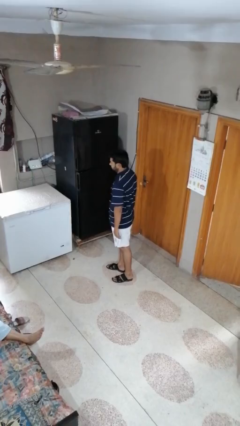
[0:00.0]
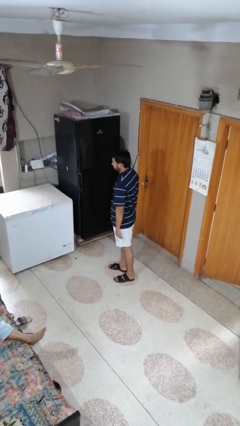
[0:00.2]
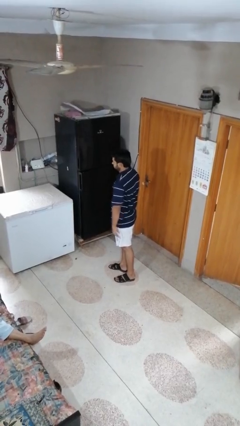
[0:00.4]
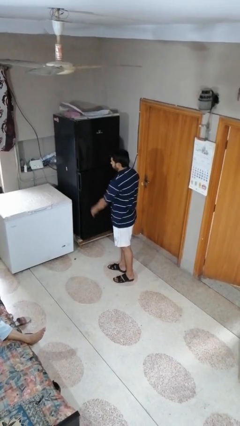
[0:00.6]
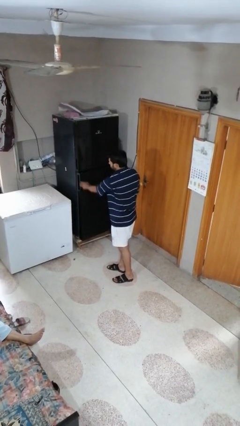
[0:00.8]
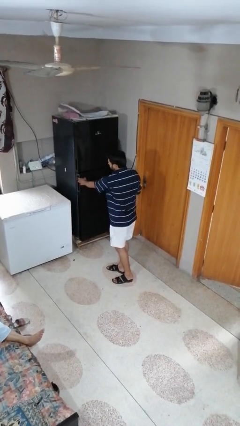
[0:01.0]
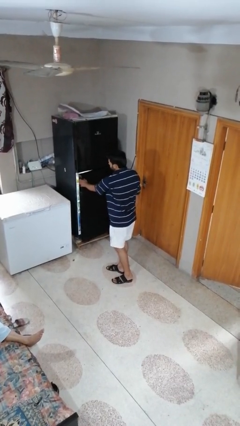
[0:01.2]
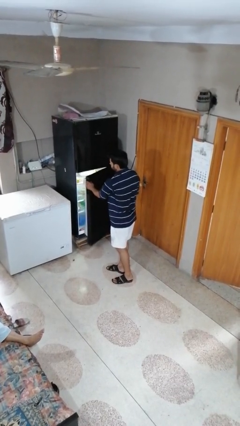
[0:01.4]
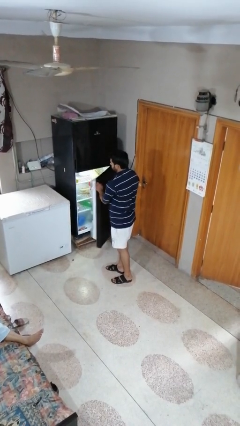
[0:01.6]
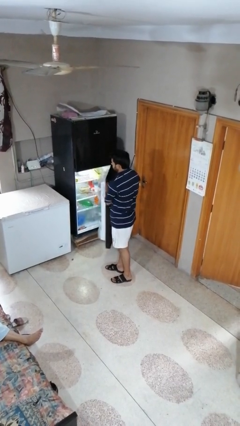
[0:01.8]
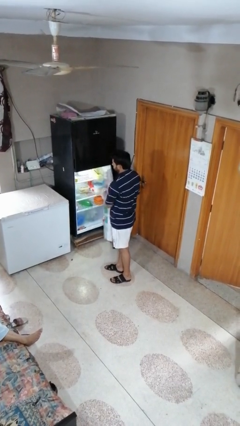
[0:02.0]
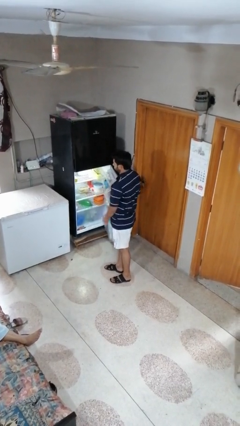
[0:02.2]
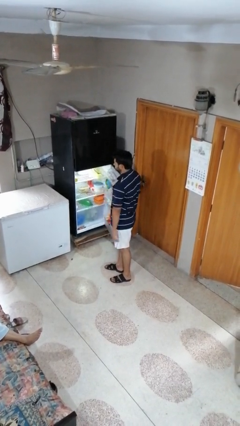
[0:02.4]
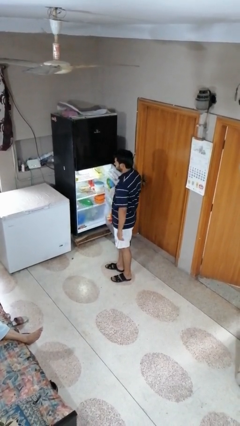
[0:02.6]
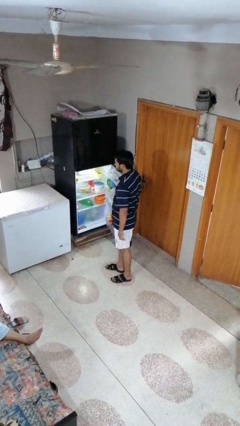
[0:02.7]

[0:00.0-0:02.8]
person opens refrigerator

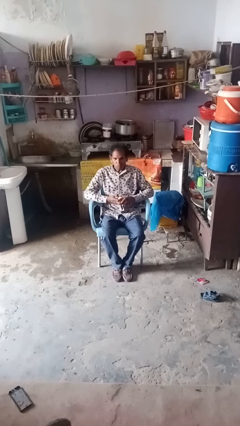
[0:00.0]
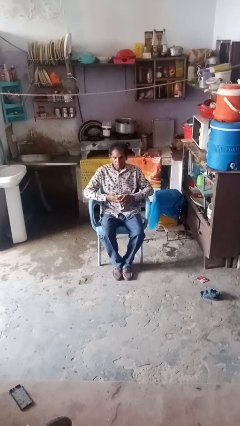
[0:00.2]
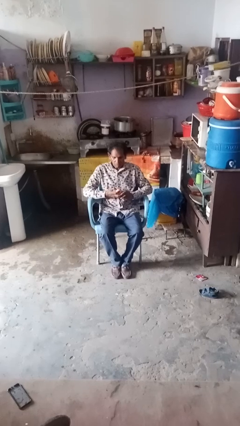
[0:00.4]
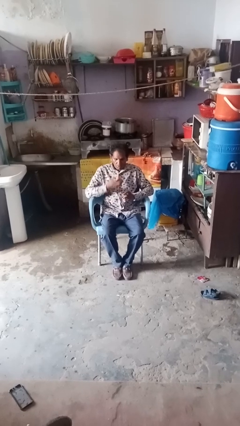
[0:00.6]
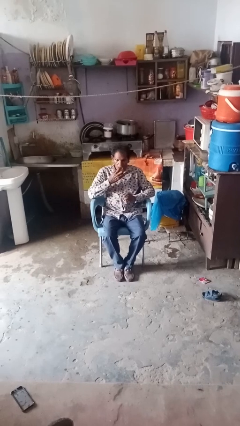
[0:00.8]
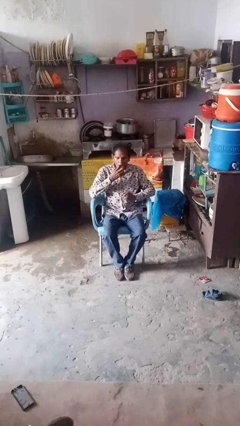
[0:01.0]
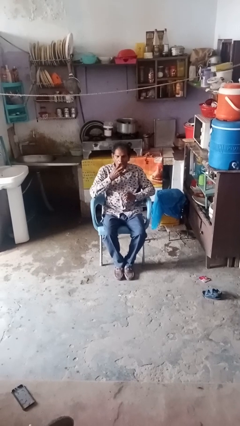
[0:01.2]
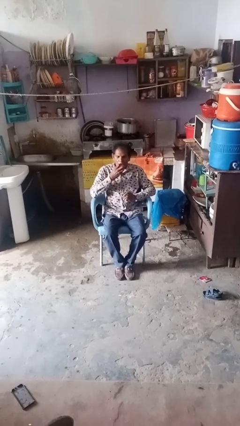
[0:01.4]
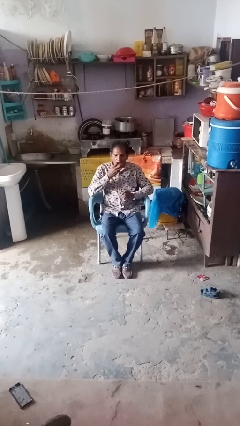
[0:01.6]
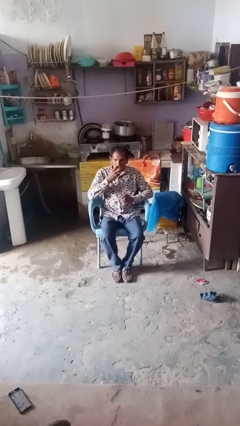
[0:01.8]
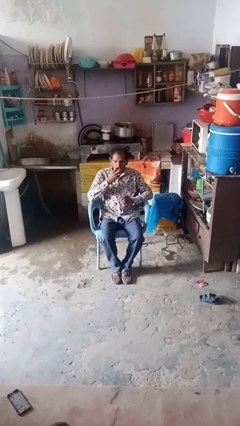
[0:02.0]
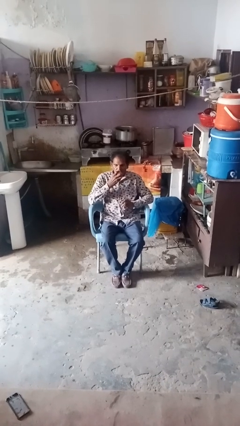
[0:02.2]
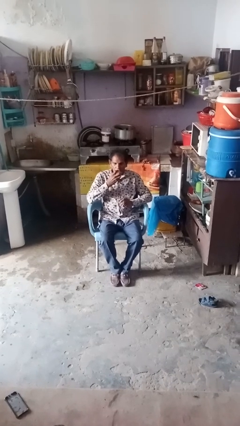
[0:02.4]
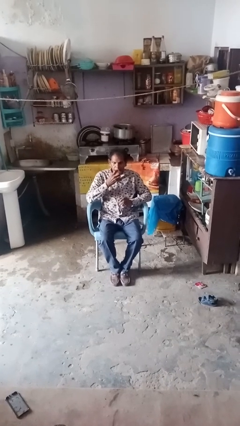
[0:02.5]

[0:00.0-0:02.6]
person eats apple

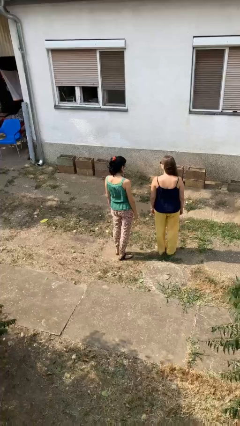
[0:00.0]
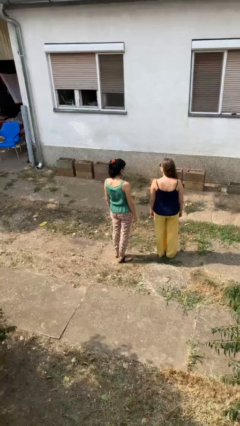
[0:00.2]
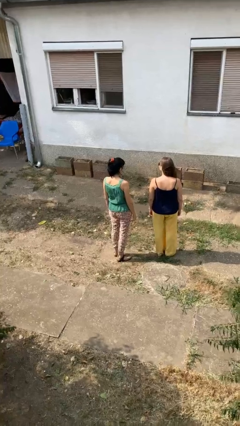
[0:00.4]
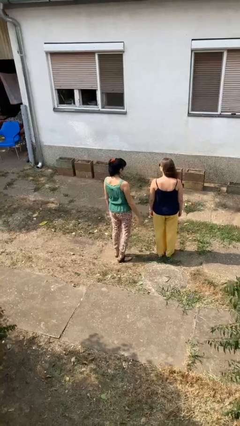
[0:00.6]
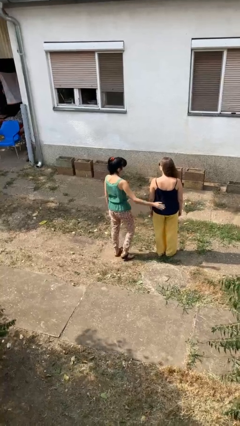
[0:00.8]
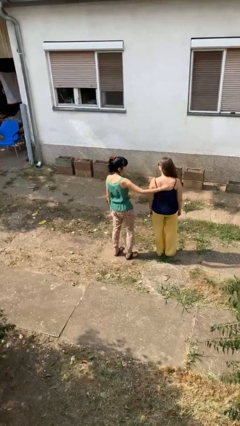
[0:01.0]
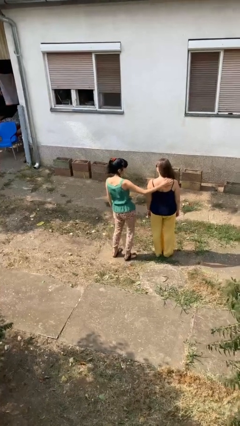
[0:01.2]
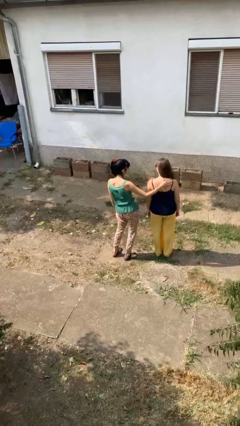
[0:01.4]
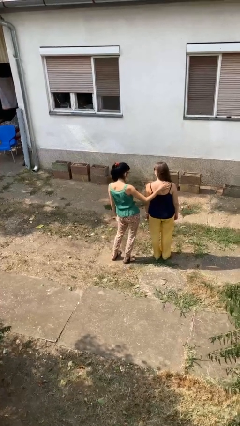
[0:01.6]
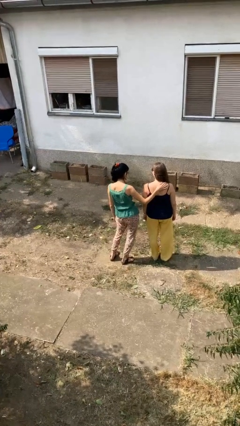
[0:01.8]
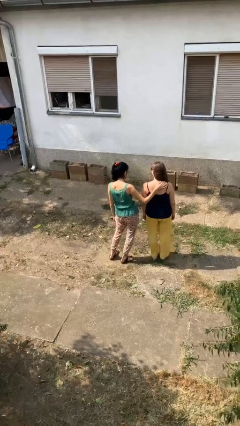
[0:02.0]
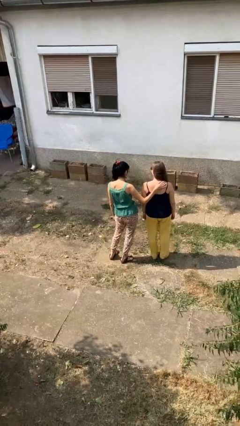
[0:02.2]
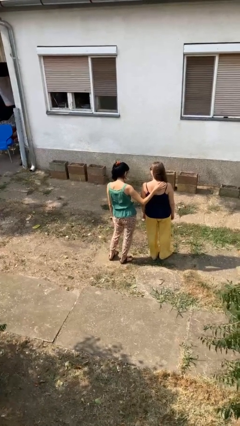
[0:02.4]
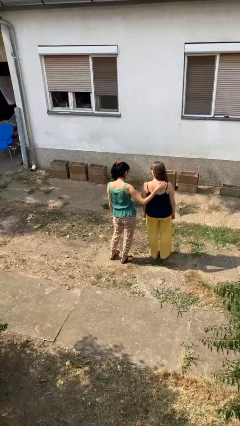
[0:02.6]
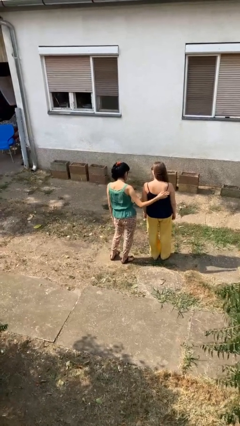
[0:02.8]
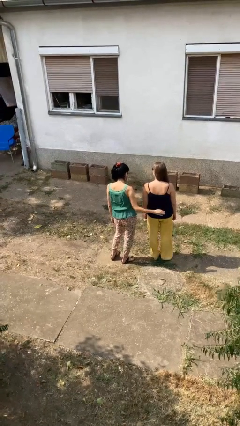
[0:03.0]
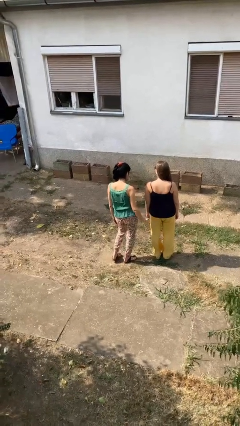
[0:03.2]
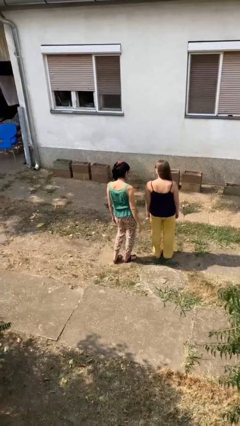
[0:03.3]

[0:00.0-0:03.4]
person touches back of person

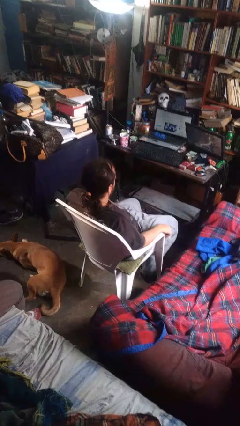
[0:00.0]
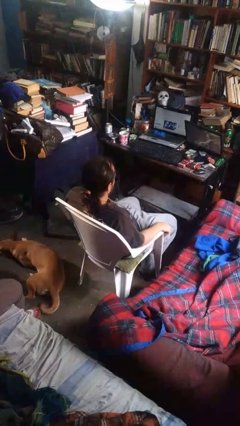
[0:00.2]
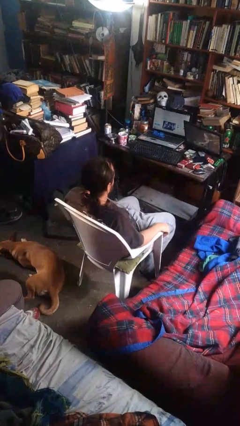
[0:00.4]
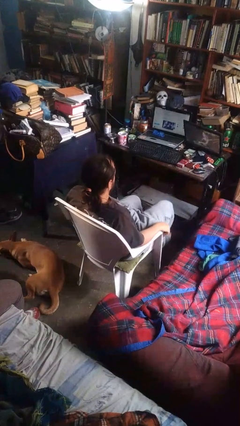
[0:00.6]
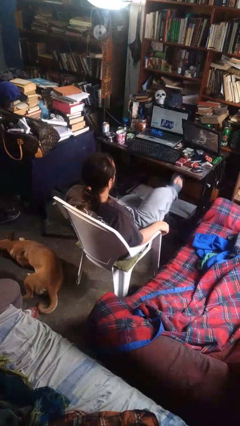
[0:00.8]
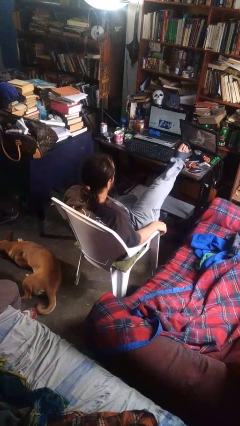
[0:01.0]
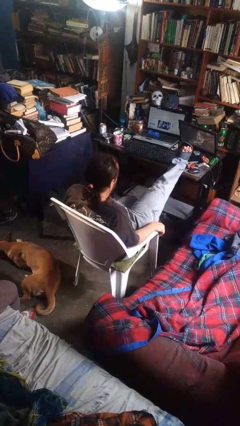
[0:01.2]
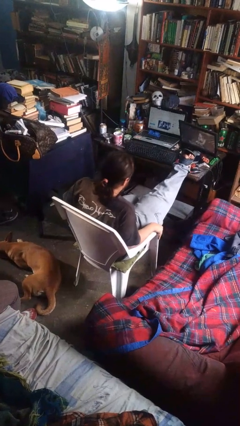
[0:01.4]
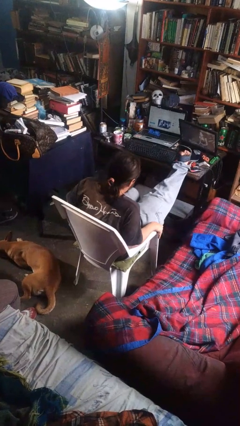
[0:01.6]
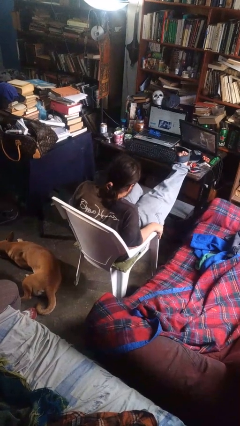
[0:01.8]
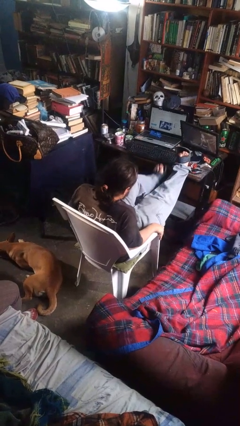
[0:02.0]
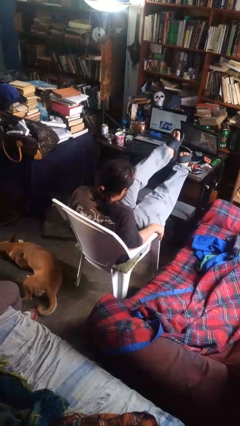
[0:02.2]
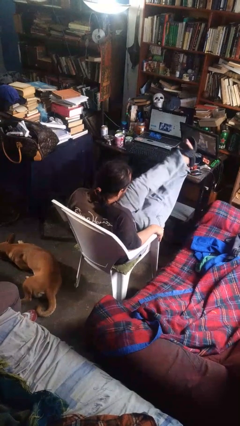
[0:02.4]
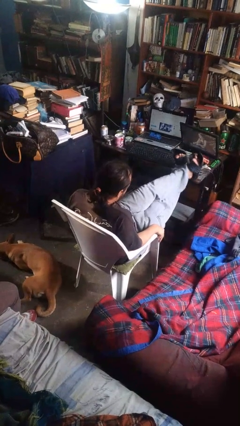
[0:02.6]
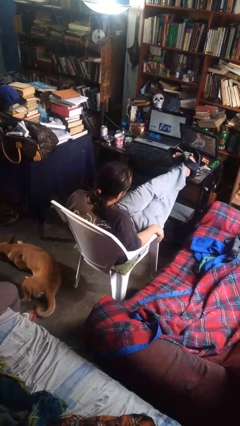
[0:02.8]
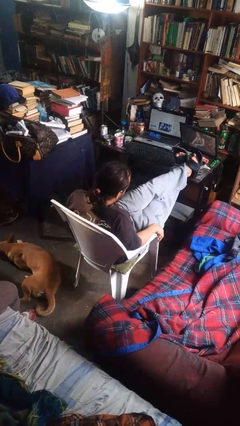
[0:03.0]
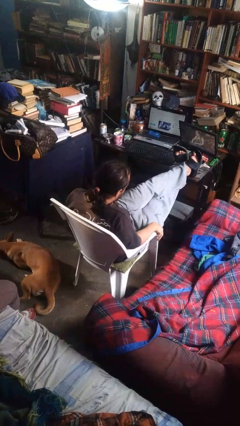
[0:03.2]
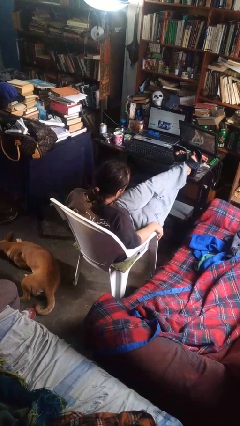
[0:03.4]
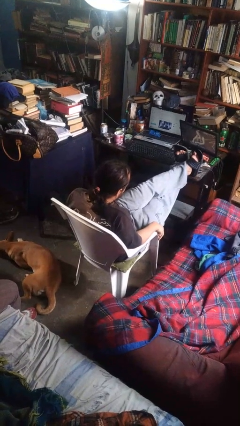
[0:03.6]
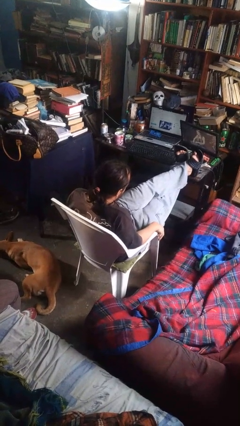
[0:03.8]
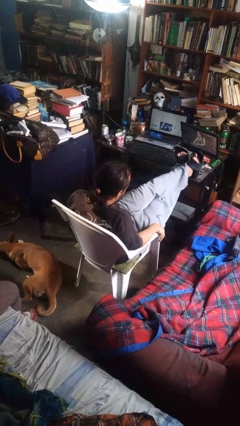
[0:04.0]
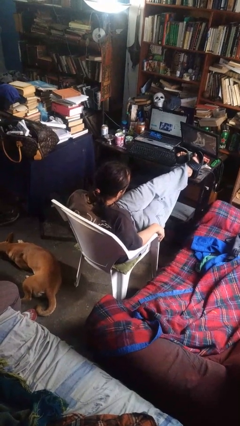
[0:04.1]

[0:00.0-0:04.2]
person puts feet up

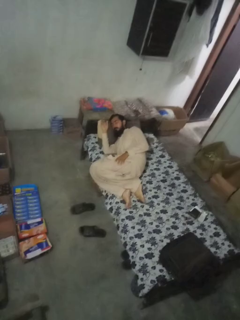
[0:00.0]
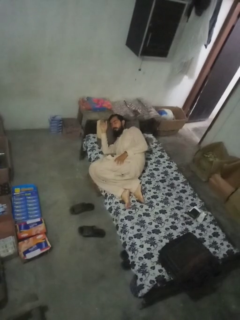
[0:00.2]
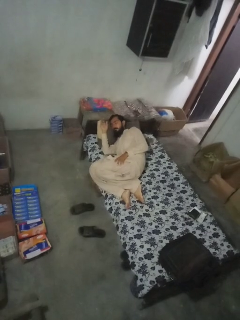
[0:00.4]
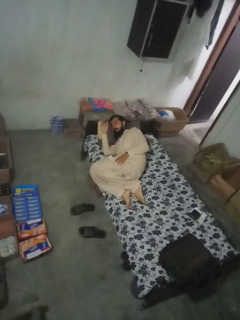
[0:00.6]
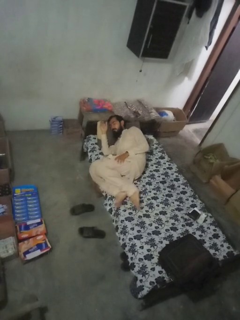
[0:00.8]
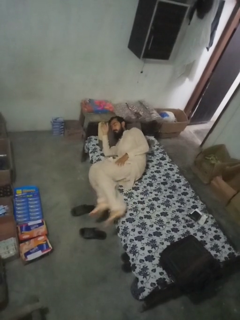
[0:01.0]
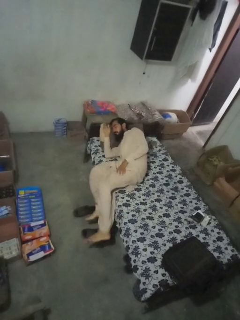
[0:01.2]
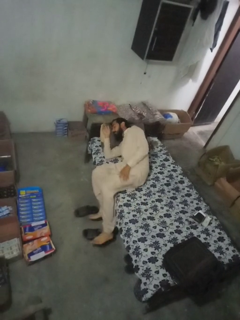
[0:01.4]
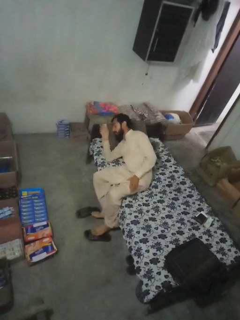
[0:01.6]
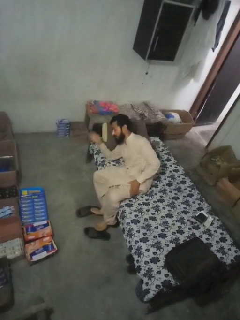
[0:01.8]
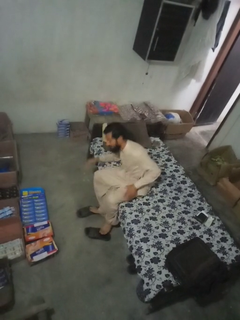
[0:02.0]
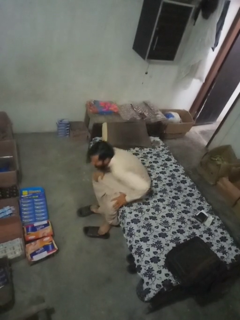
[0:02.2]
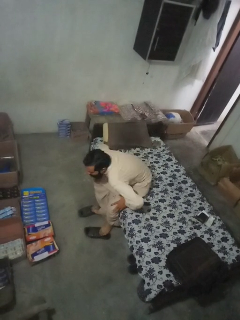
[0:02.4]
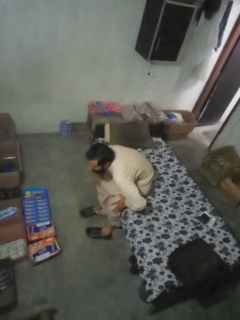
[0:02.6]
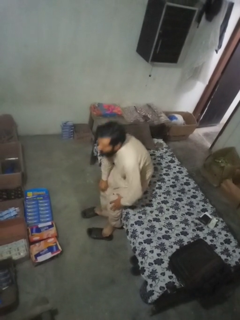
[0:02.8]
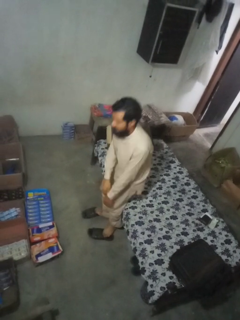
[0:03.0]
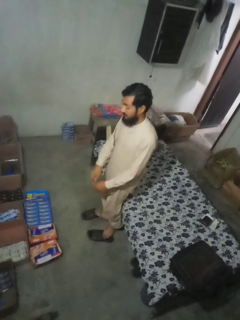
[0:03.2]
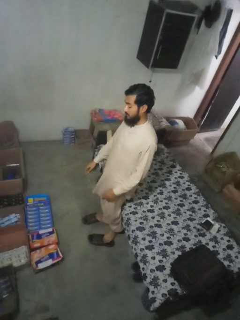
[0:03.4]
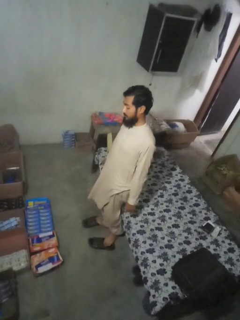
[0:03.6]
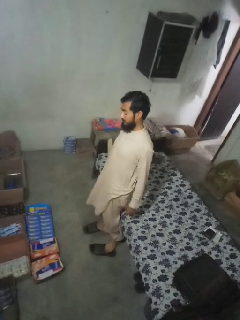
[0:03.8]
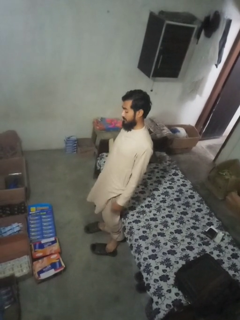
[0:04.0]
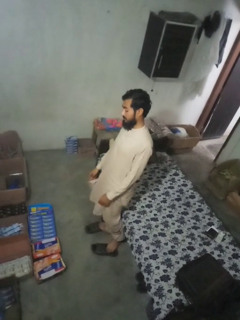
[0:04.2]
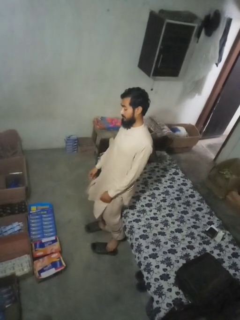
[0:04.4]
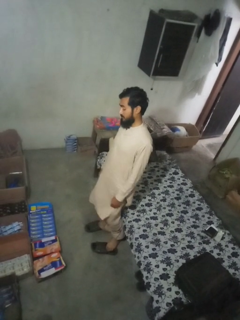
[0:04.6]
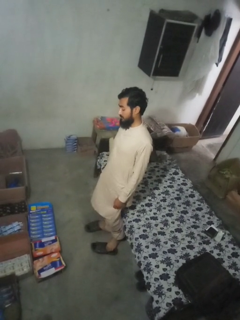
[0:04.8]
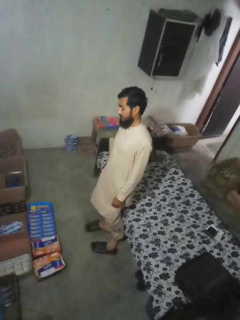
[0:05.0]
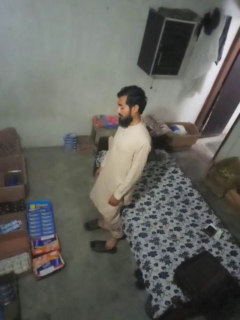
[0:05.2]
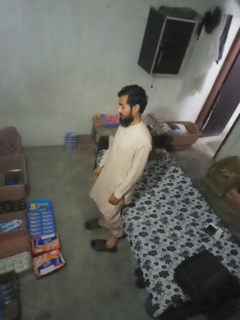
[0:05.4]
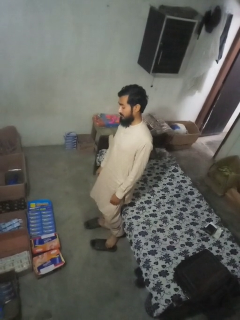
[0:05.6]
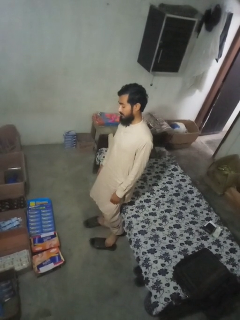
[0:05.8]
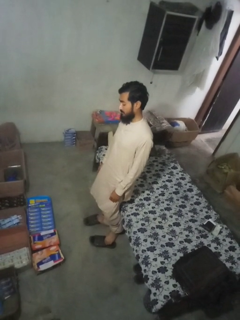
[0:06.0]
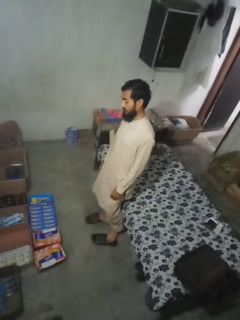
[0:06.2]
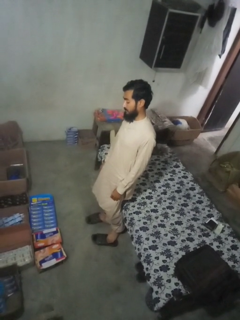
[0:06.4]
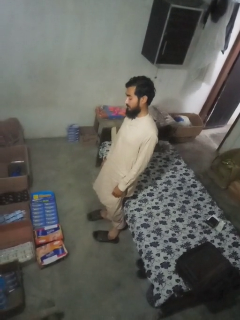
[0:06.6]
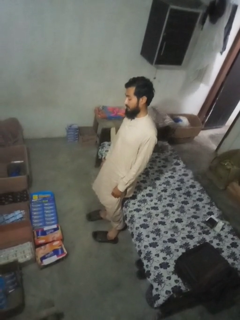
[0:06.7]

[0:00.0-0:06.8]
person stands up
